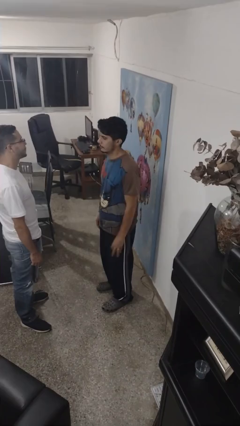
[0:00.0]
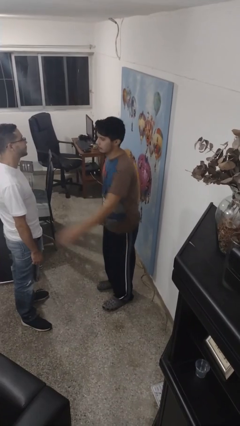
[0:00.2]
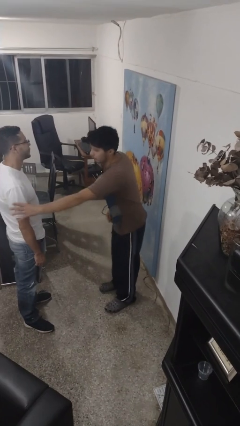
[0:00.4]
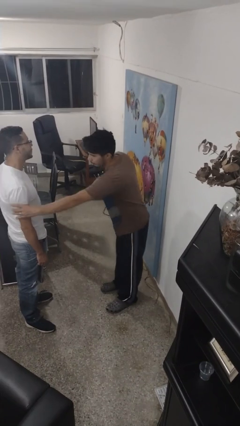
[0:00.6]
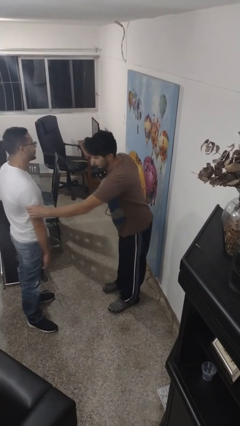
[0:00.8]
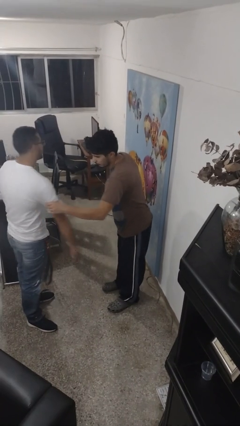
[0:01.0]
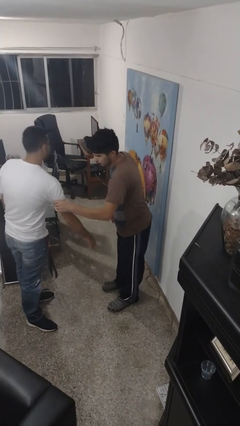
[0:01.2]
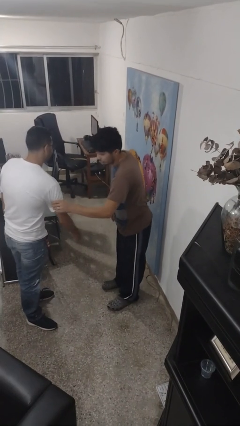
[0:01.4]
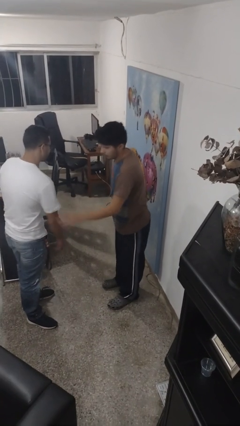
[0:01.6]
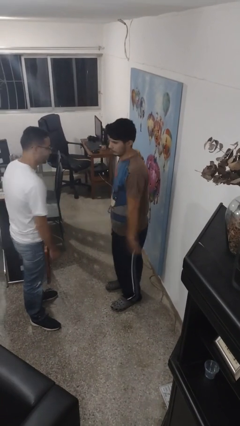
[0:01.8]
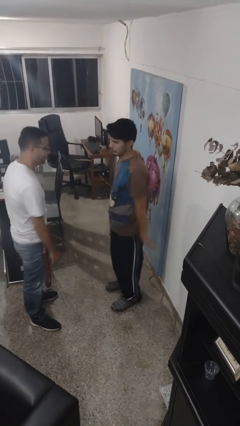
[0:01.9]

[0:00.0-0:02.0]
person grabs person by bicep

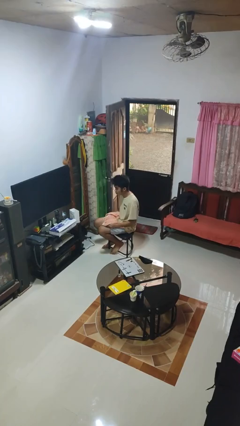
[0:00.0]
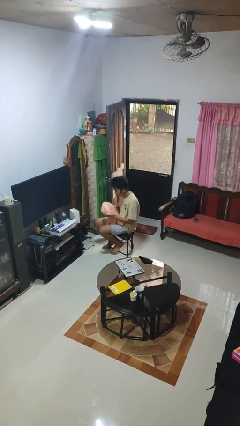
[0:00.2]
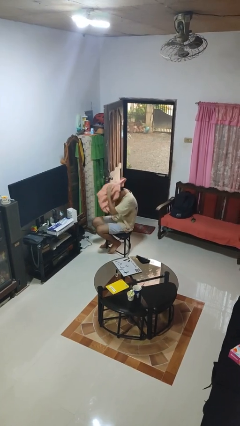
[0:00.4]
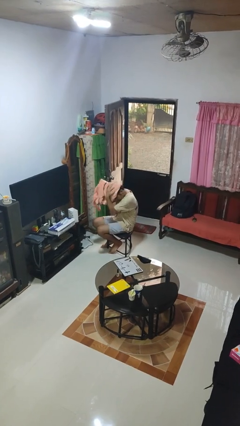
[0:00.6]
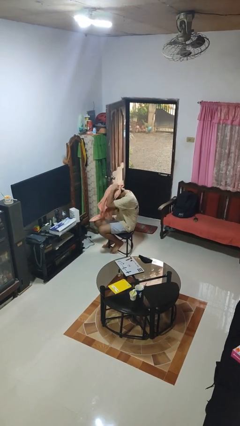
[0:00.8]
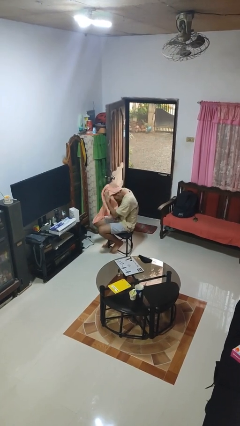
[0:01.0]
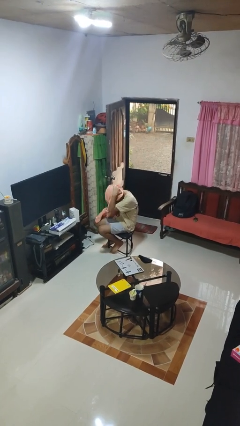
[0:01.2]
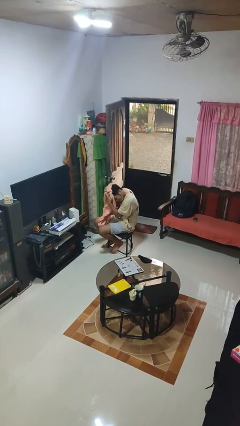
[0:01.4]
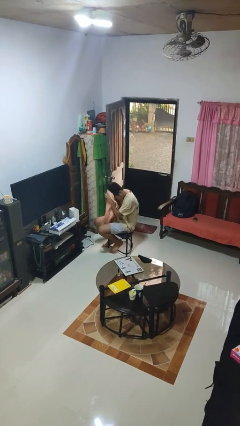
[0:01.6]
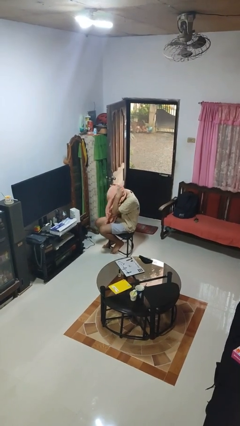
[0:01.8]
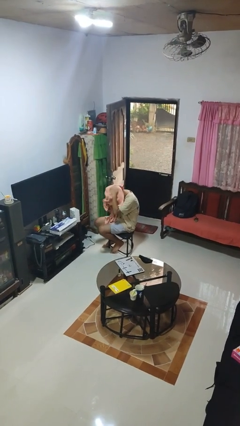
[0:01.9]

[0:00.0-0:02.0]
person dries hair with towel

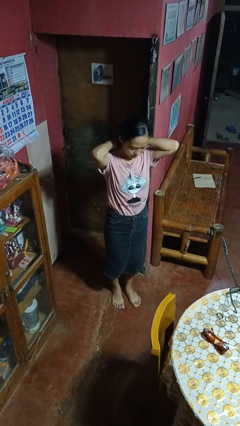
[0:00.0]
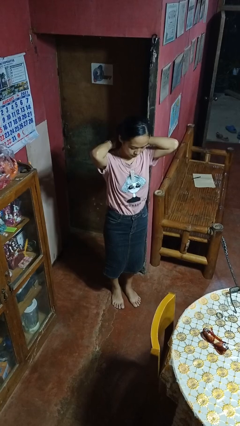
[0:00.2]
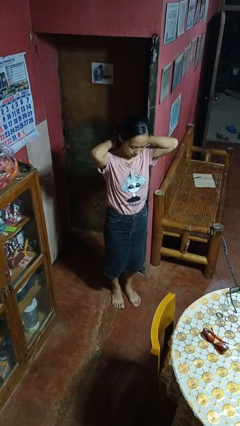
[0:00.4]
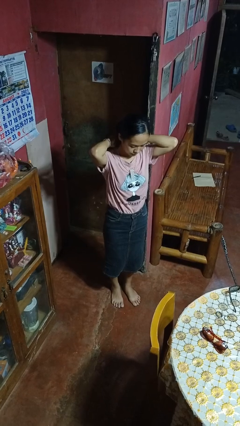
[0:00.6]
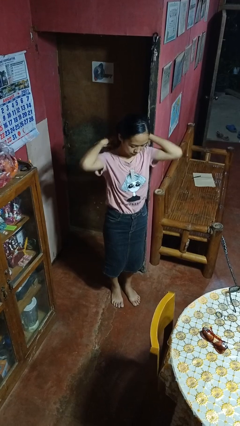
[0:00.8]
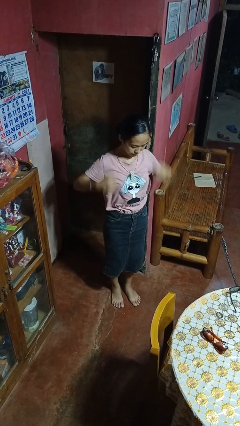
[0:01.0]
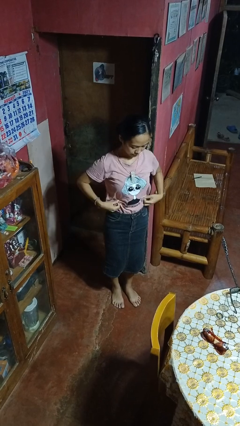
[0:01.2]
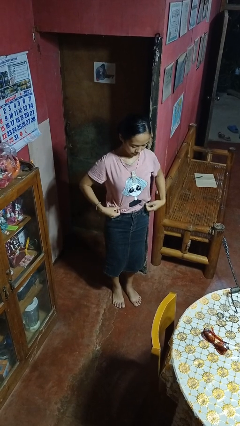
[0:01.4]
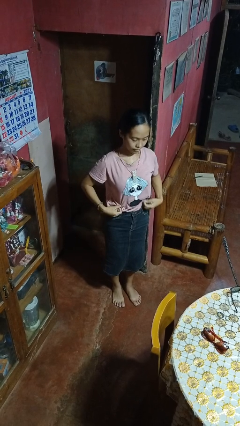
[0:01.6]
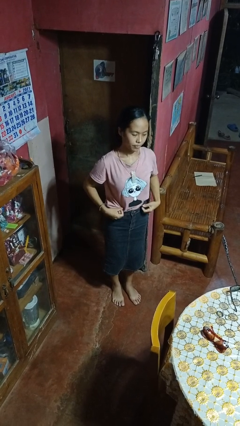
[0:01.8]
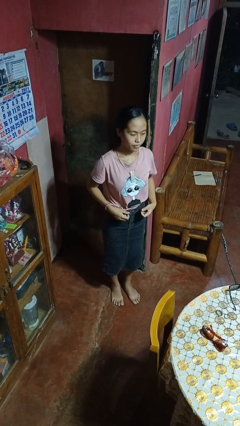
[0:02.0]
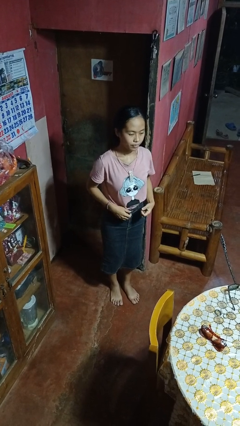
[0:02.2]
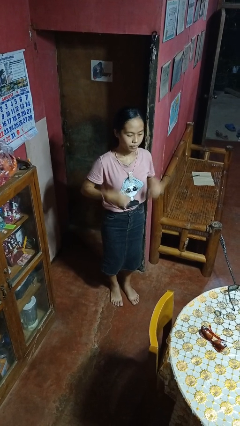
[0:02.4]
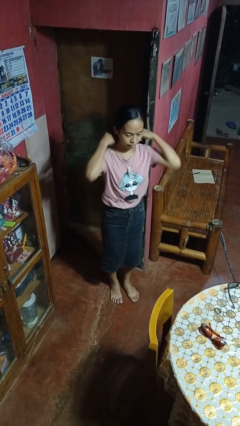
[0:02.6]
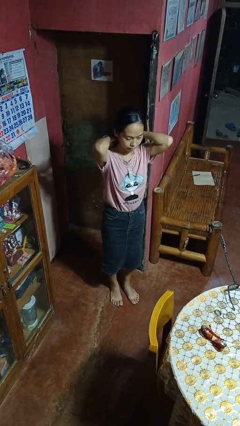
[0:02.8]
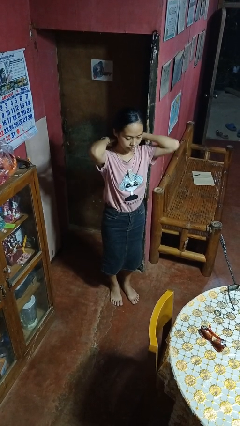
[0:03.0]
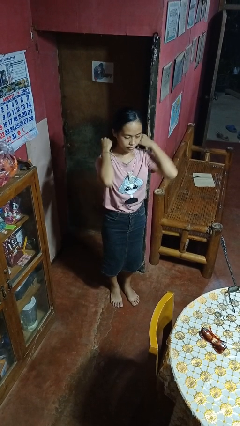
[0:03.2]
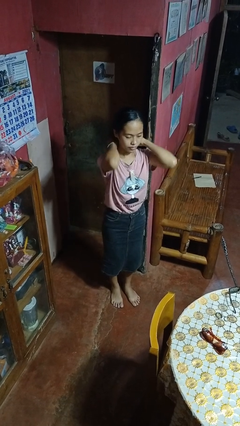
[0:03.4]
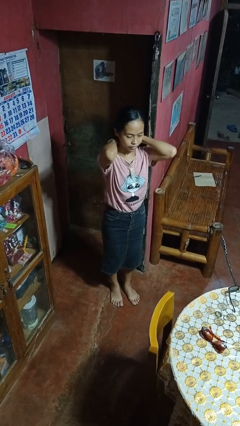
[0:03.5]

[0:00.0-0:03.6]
person puts on necklace

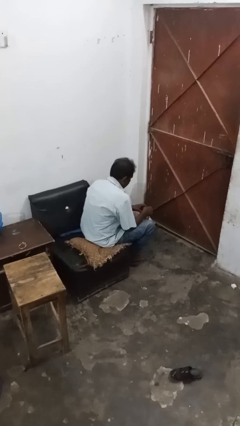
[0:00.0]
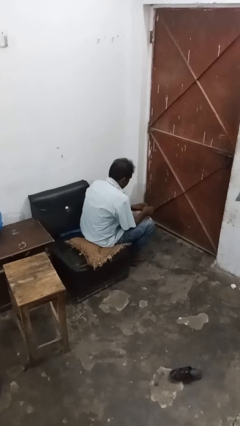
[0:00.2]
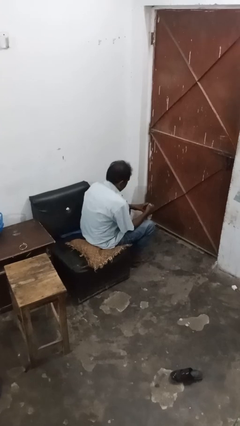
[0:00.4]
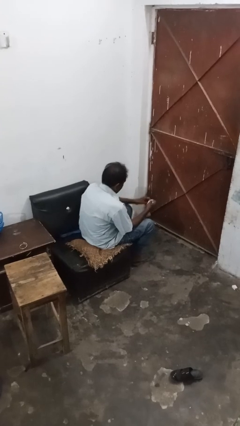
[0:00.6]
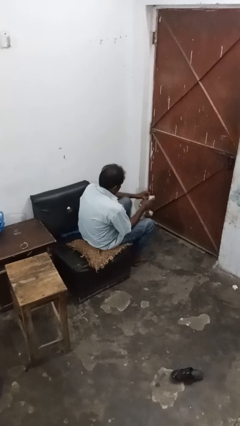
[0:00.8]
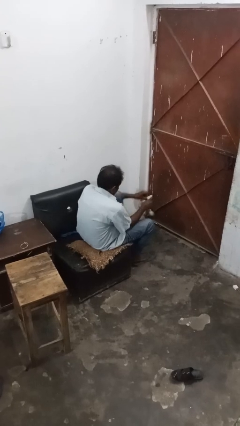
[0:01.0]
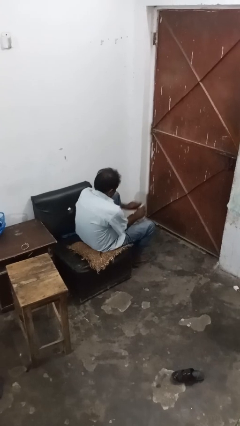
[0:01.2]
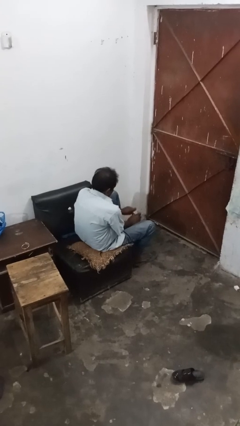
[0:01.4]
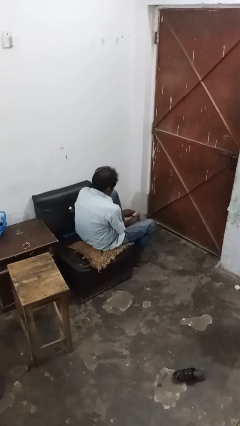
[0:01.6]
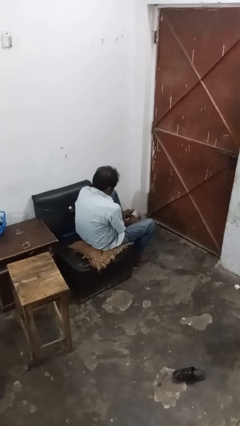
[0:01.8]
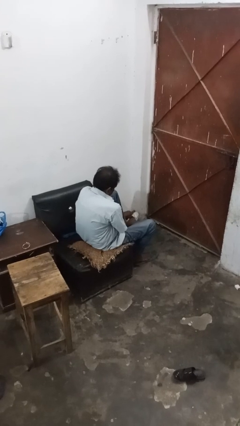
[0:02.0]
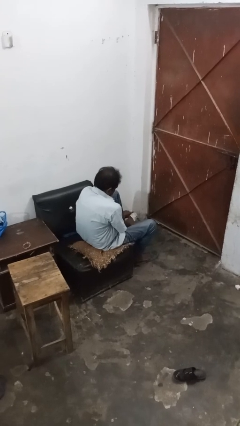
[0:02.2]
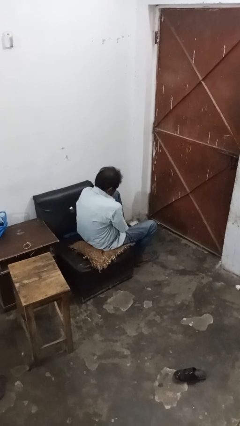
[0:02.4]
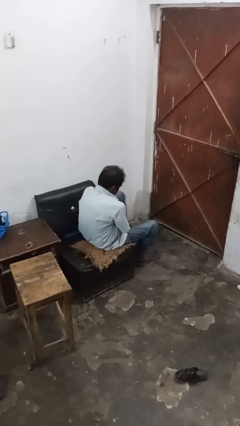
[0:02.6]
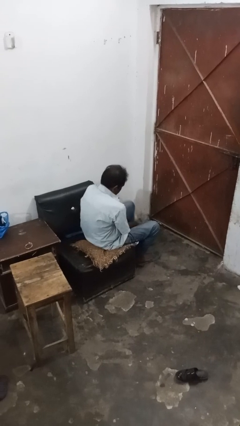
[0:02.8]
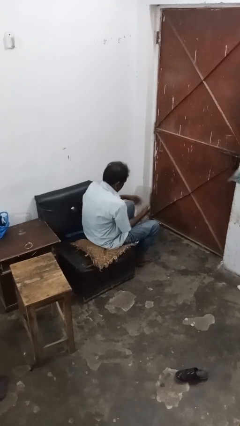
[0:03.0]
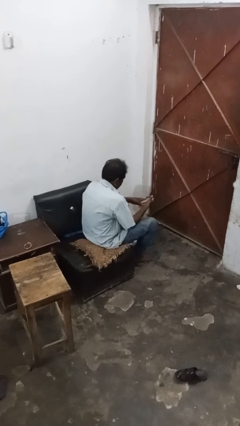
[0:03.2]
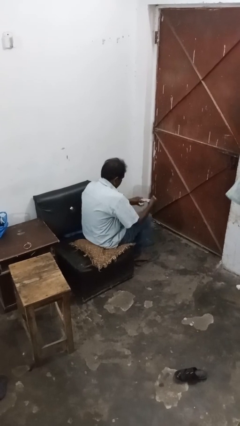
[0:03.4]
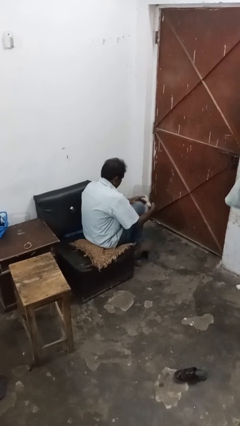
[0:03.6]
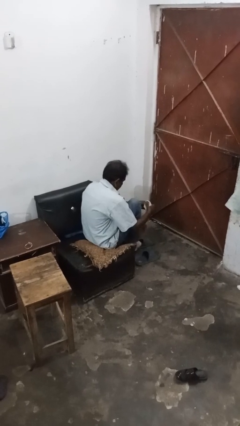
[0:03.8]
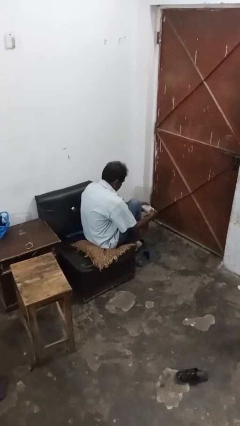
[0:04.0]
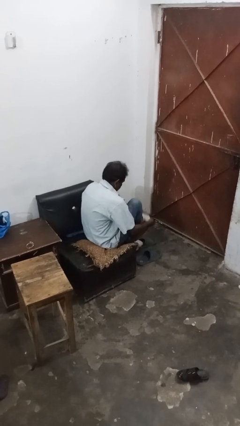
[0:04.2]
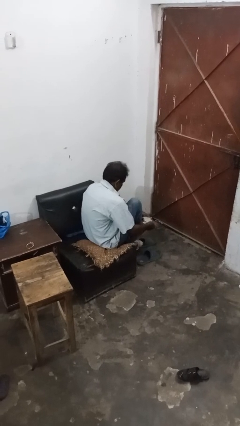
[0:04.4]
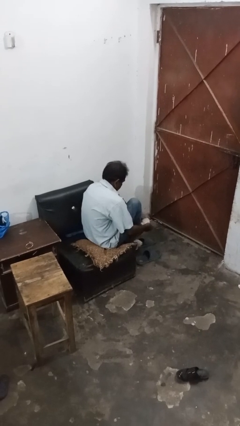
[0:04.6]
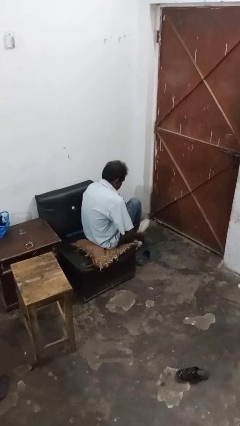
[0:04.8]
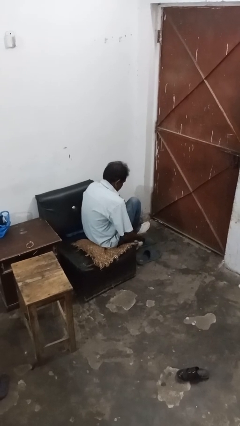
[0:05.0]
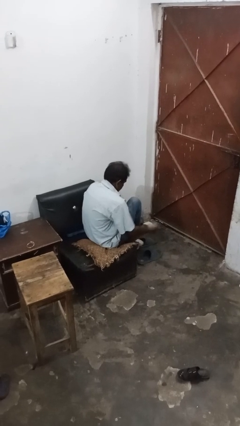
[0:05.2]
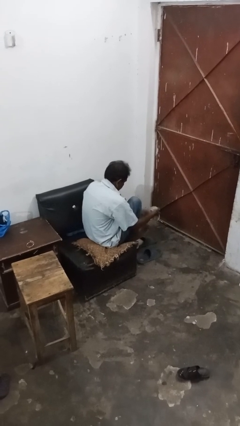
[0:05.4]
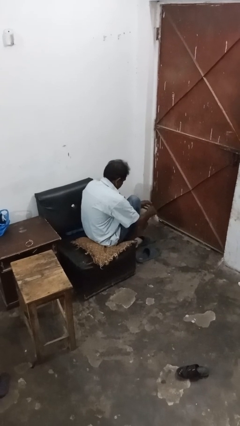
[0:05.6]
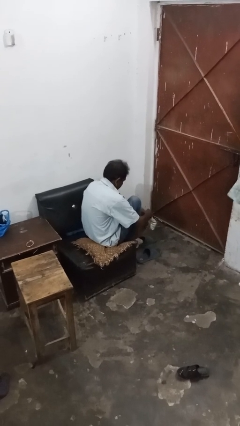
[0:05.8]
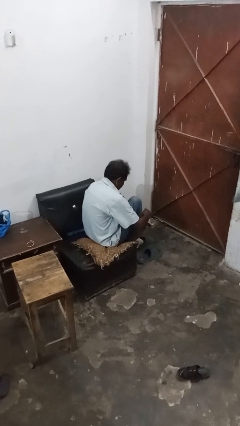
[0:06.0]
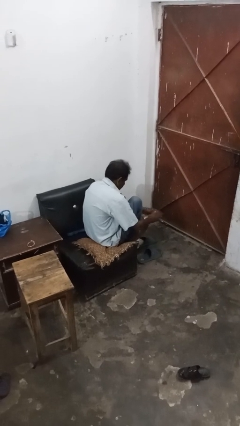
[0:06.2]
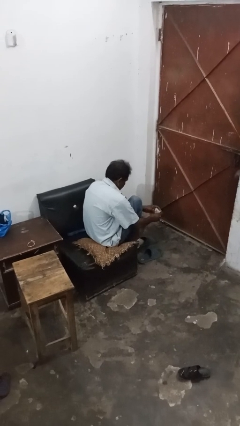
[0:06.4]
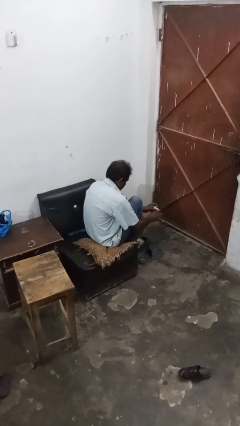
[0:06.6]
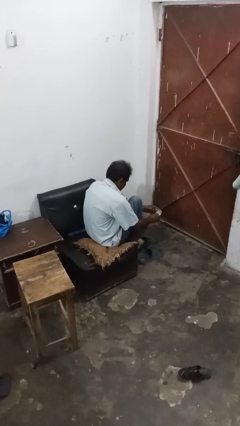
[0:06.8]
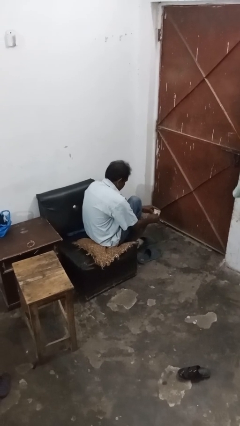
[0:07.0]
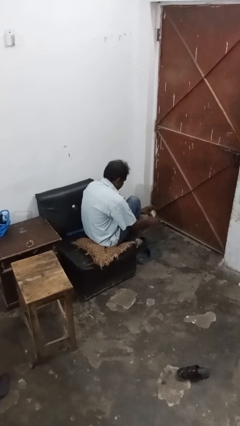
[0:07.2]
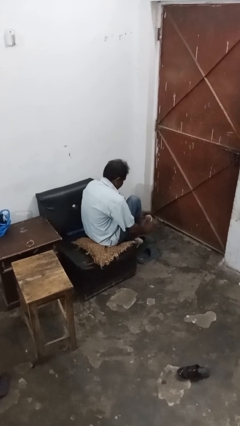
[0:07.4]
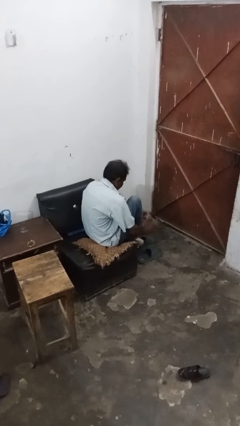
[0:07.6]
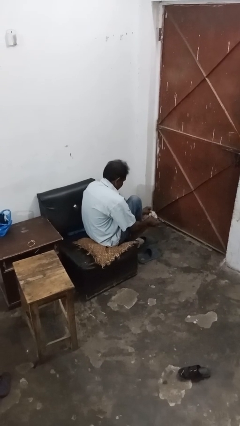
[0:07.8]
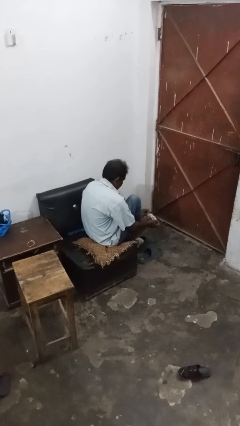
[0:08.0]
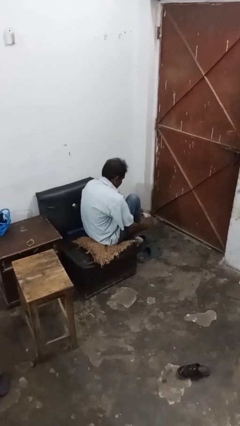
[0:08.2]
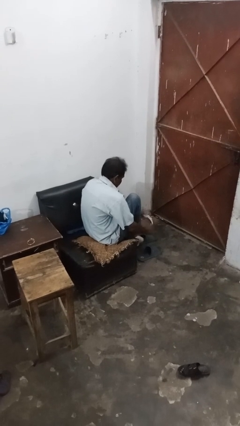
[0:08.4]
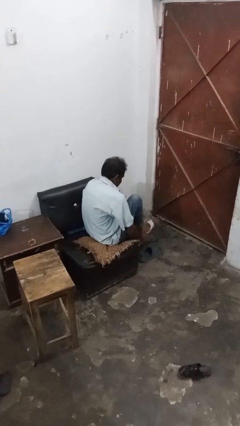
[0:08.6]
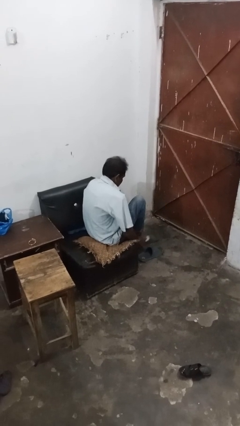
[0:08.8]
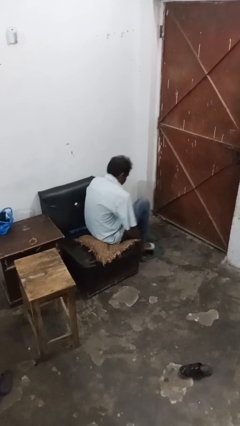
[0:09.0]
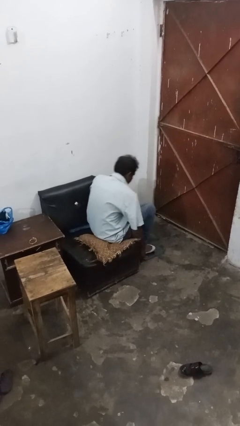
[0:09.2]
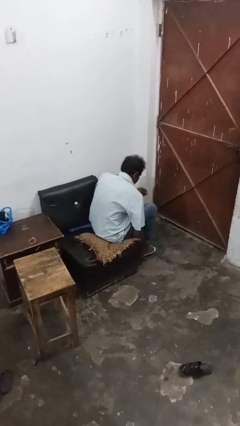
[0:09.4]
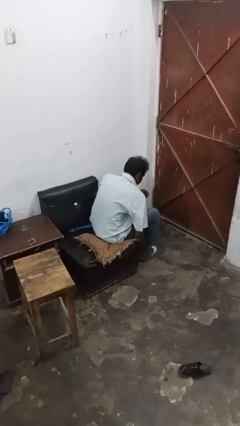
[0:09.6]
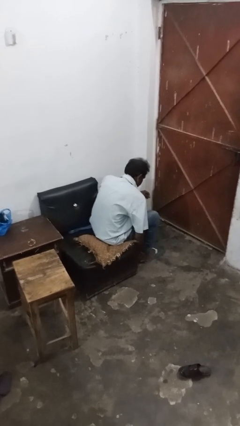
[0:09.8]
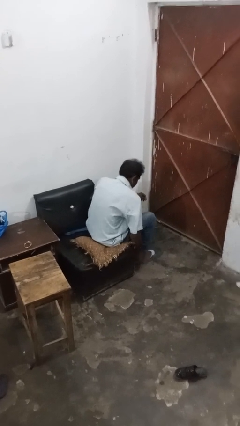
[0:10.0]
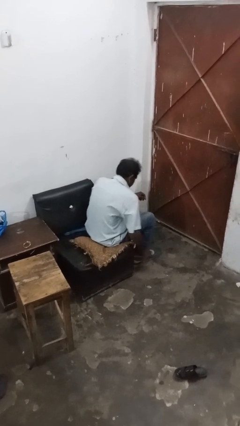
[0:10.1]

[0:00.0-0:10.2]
person puts on socks
